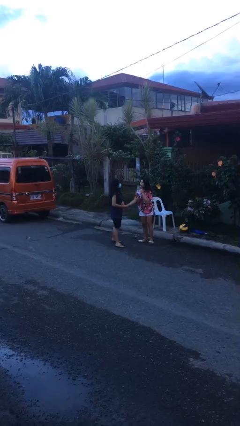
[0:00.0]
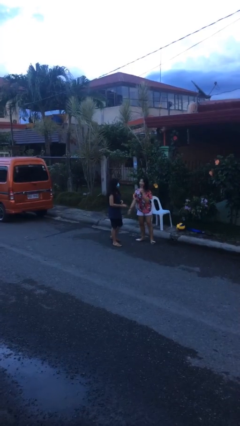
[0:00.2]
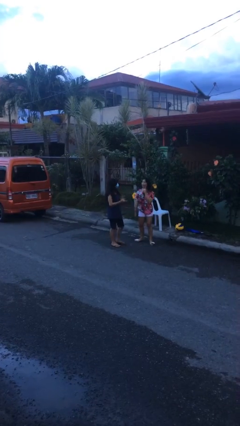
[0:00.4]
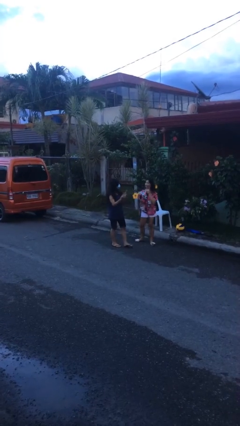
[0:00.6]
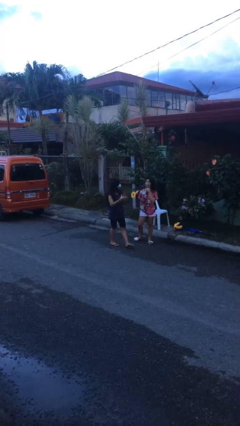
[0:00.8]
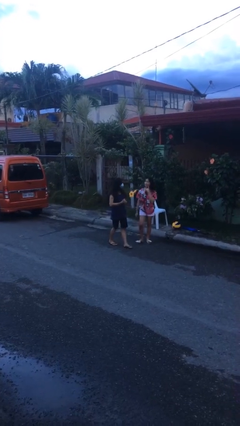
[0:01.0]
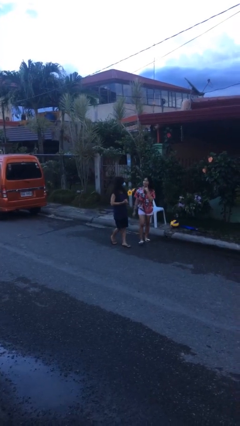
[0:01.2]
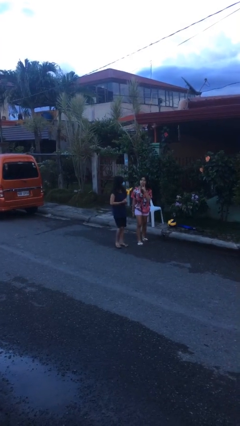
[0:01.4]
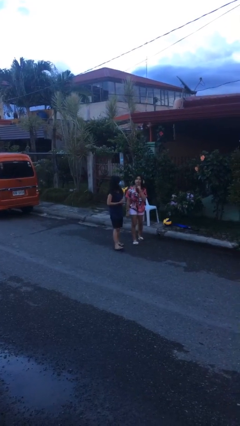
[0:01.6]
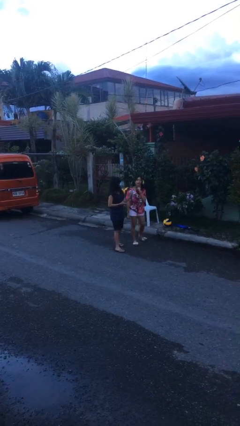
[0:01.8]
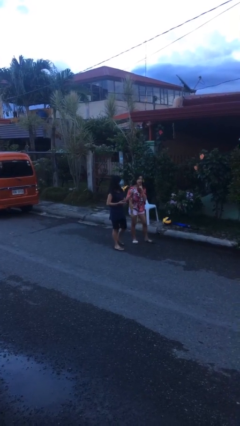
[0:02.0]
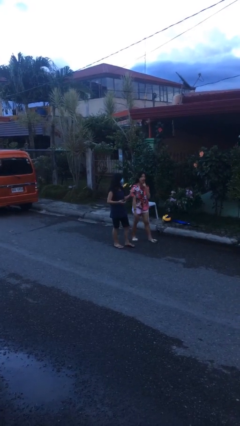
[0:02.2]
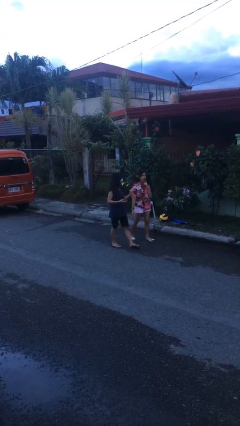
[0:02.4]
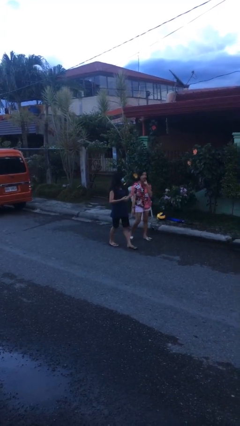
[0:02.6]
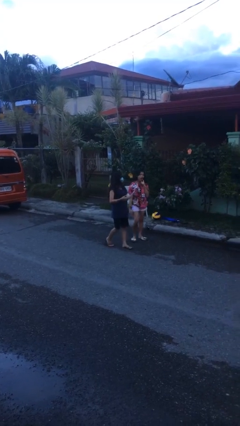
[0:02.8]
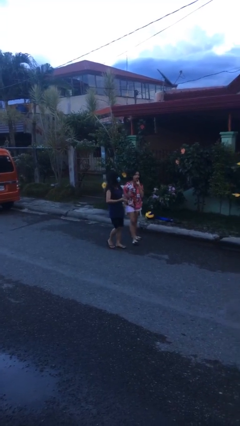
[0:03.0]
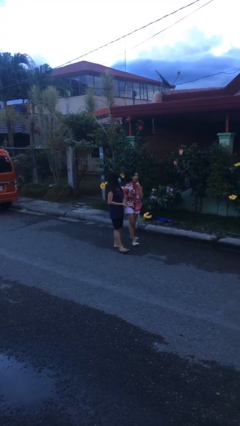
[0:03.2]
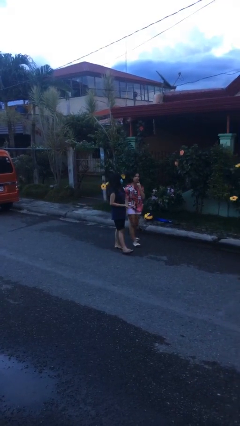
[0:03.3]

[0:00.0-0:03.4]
person talks to person

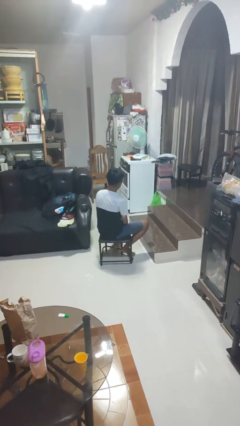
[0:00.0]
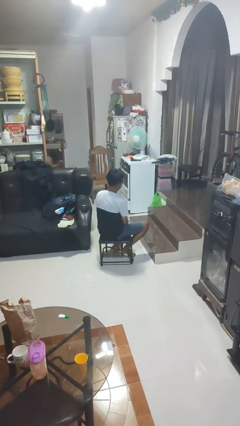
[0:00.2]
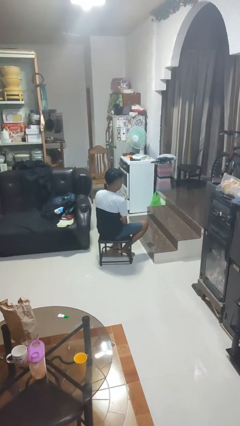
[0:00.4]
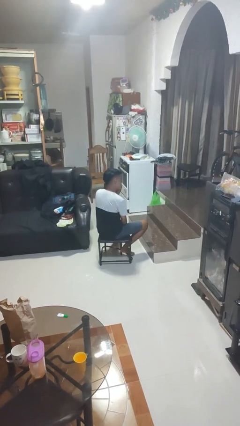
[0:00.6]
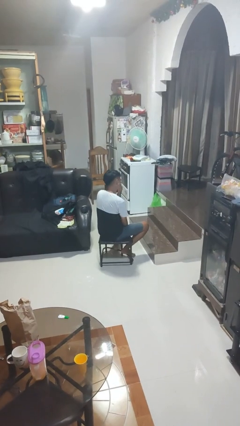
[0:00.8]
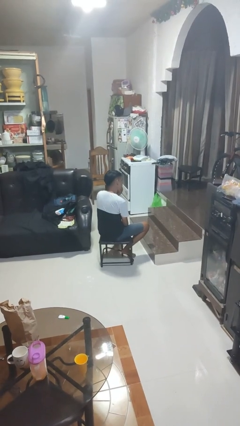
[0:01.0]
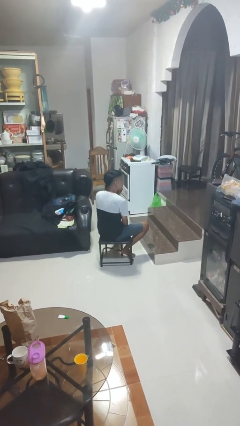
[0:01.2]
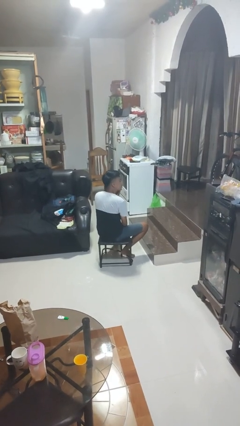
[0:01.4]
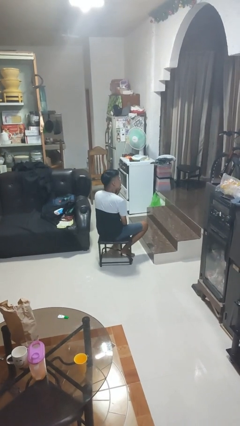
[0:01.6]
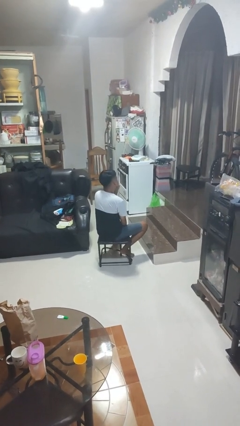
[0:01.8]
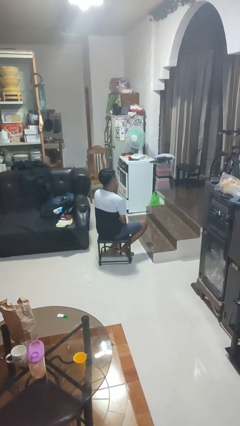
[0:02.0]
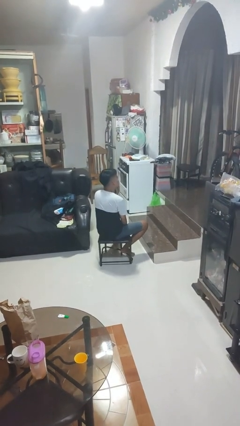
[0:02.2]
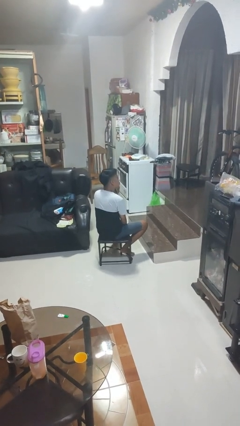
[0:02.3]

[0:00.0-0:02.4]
person strokes chin

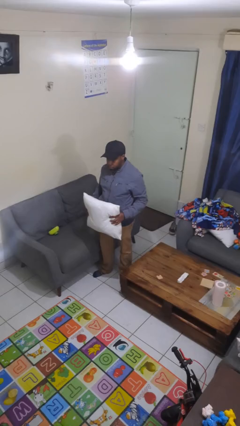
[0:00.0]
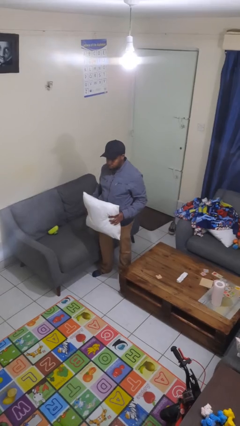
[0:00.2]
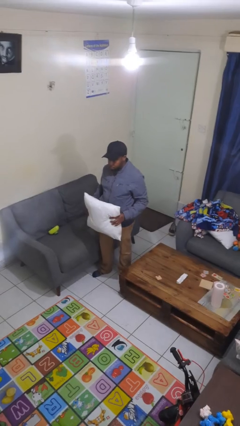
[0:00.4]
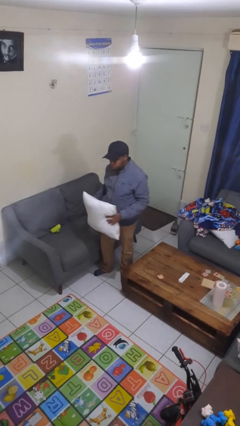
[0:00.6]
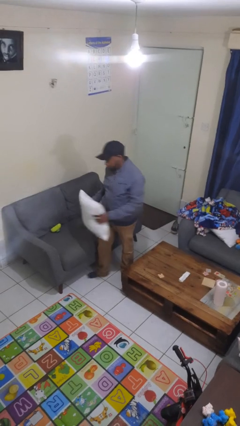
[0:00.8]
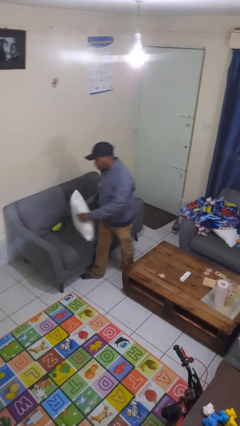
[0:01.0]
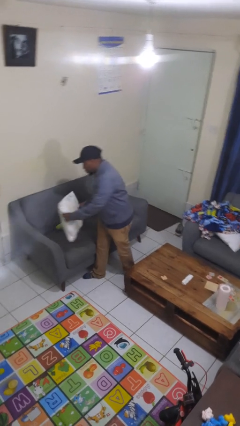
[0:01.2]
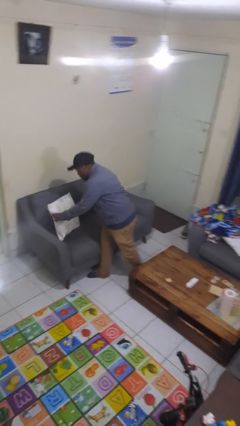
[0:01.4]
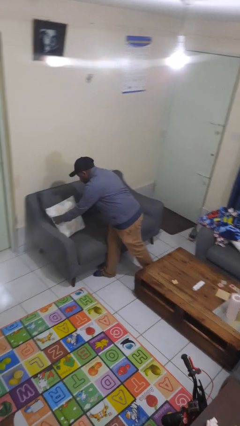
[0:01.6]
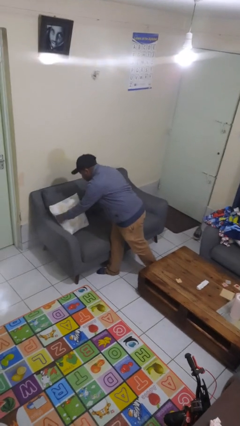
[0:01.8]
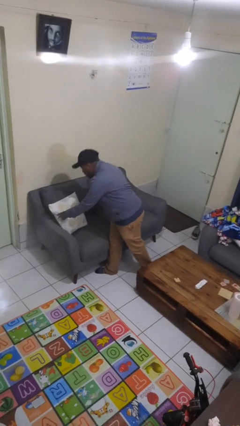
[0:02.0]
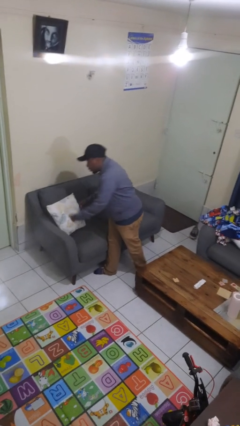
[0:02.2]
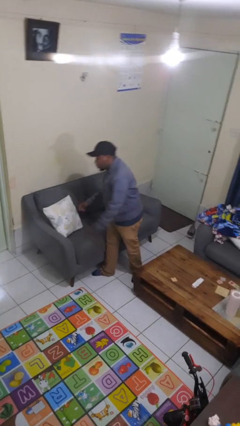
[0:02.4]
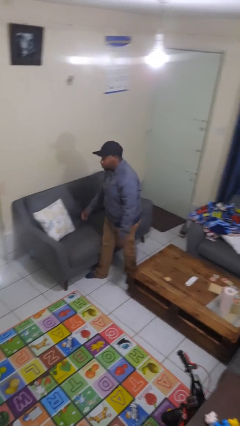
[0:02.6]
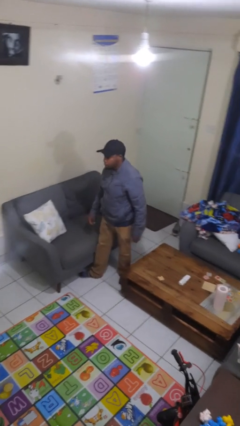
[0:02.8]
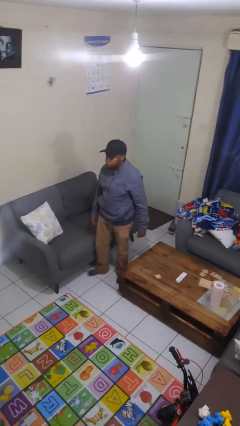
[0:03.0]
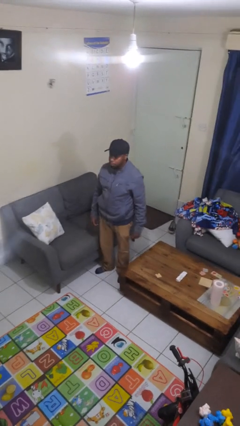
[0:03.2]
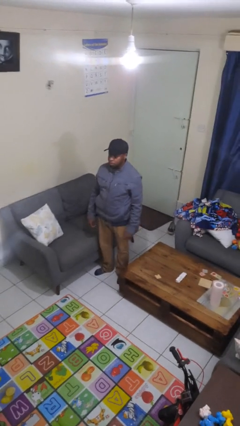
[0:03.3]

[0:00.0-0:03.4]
person puts down object on couch

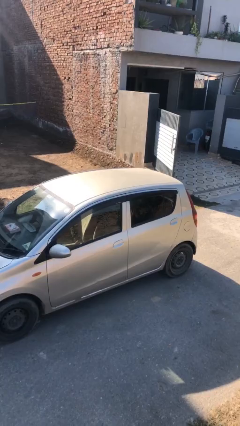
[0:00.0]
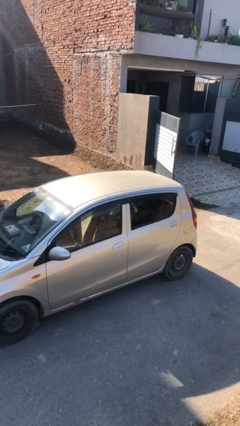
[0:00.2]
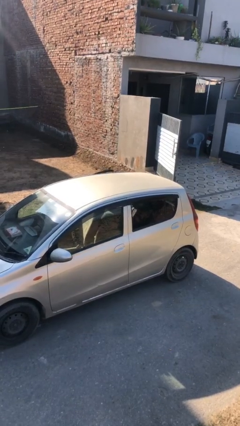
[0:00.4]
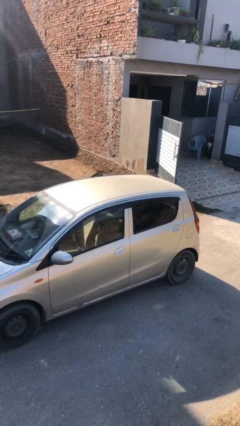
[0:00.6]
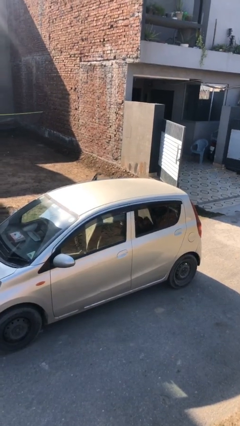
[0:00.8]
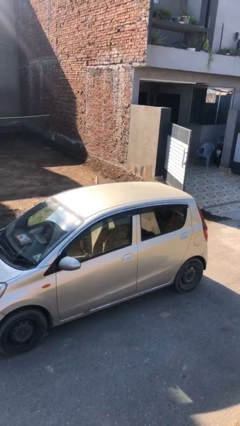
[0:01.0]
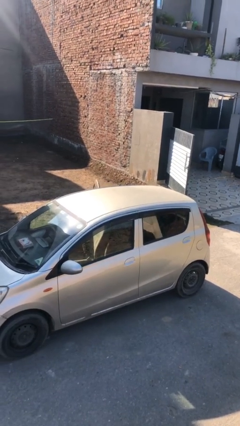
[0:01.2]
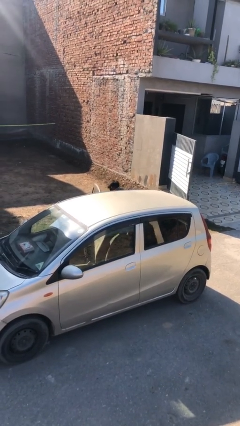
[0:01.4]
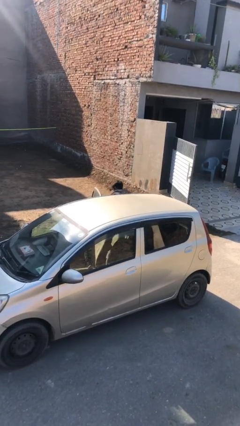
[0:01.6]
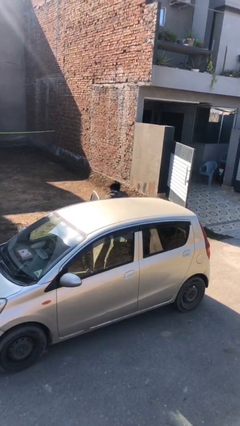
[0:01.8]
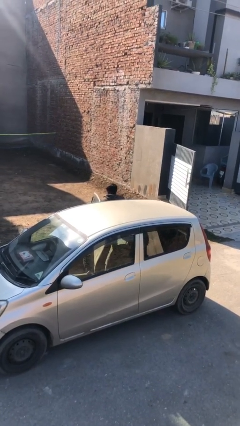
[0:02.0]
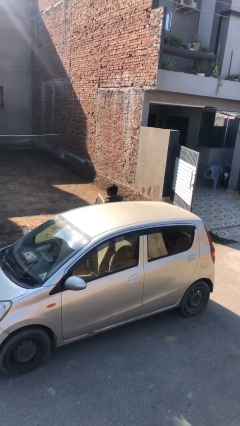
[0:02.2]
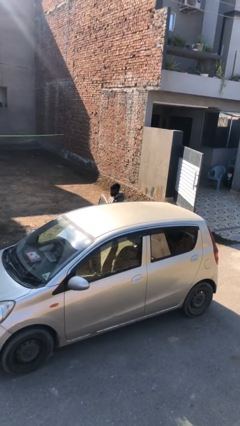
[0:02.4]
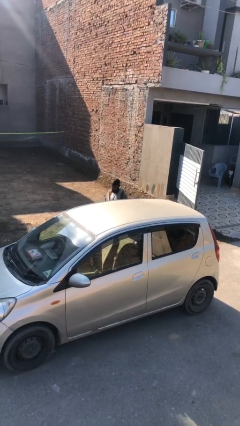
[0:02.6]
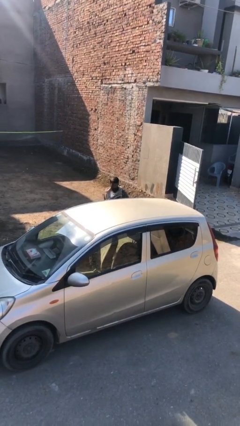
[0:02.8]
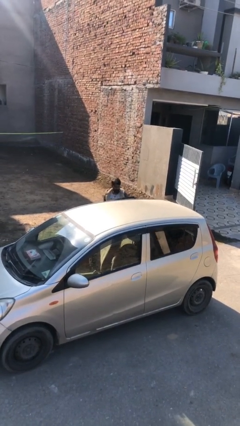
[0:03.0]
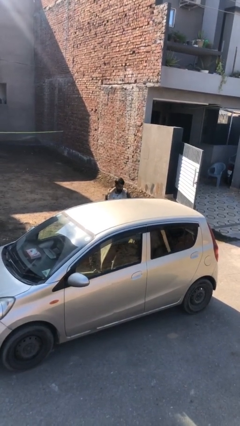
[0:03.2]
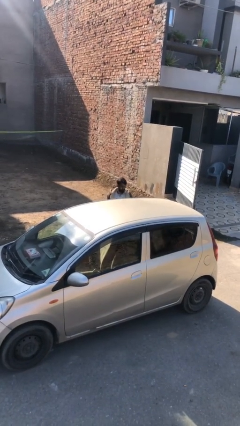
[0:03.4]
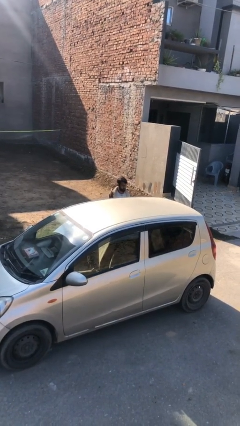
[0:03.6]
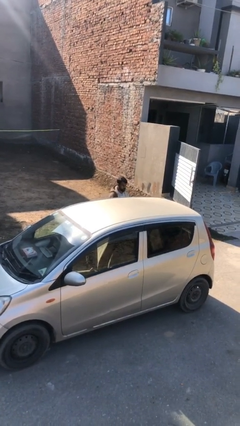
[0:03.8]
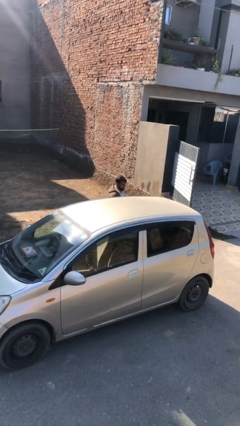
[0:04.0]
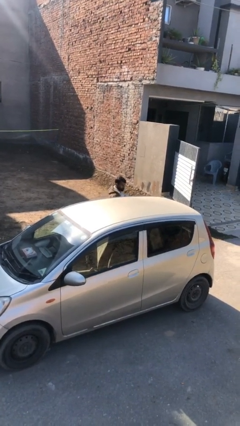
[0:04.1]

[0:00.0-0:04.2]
car drops off person

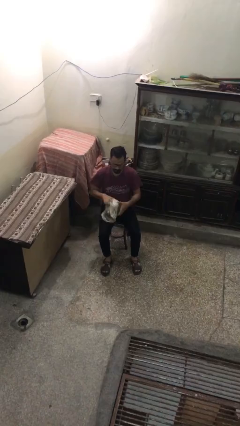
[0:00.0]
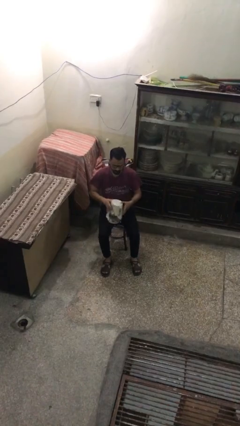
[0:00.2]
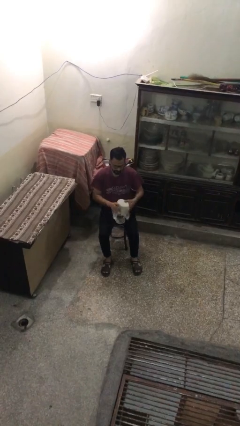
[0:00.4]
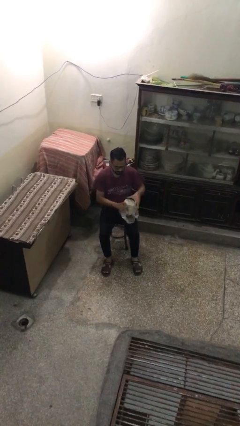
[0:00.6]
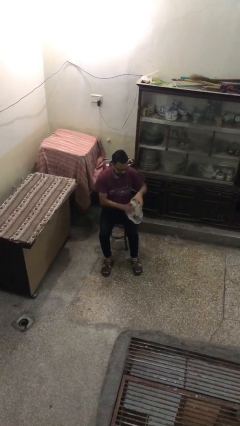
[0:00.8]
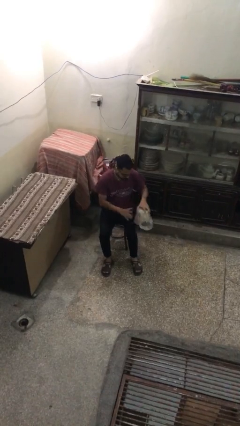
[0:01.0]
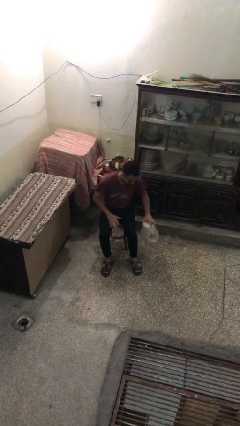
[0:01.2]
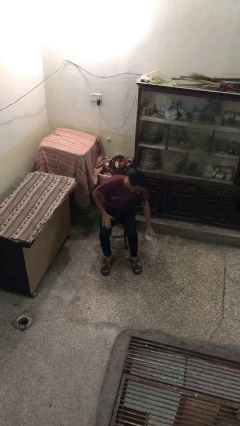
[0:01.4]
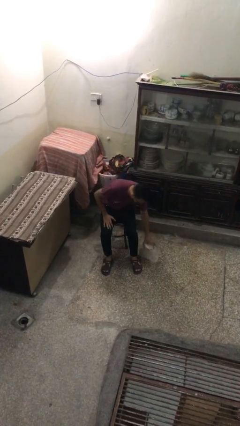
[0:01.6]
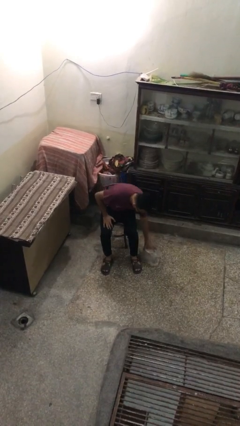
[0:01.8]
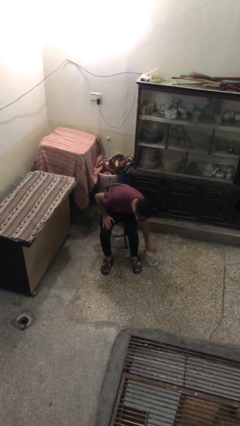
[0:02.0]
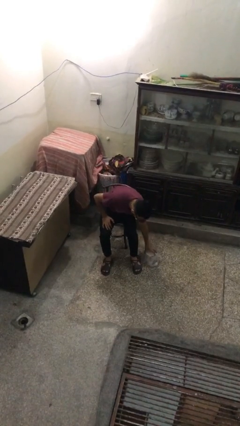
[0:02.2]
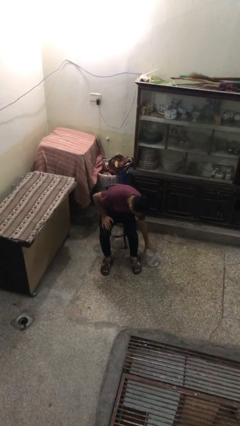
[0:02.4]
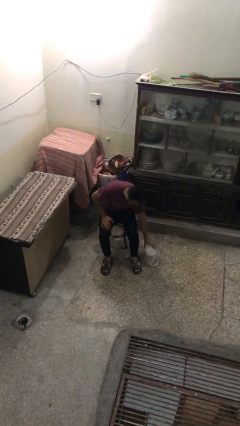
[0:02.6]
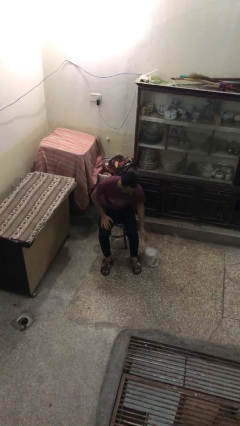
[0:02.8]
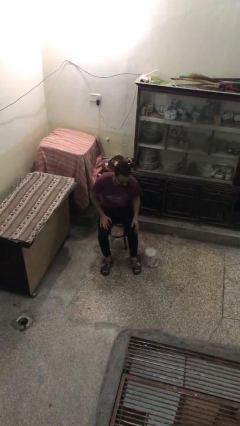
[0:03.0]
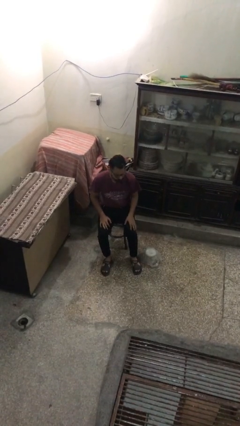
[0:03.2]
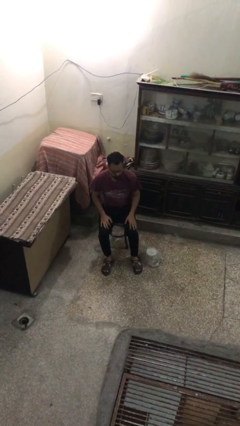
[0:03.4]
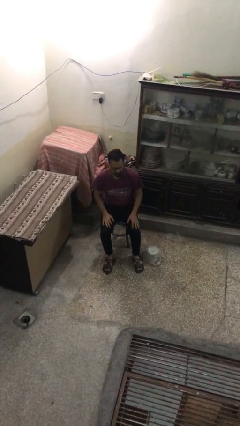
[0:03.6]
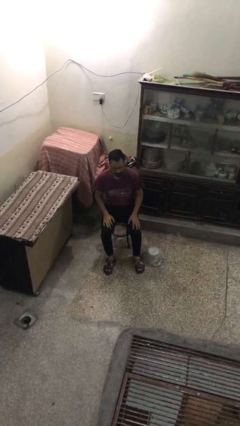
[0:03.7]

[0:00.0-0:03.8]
person puts down object on floor

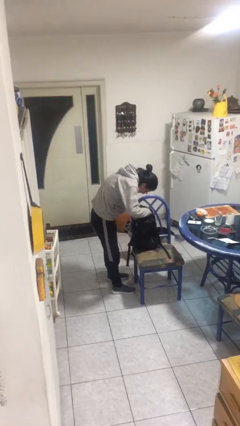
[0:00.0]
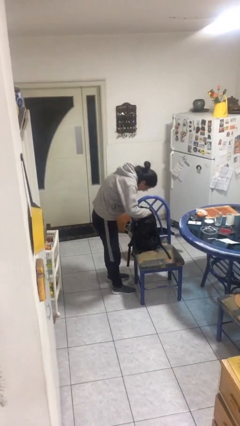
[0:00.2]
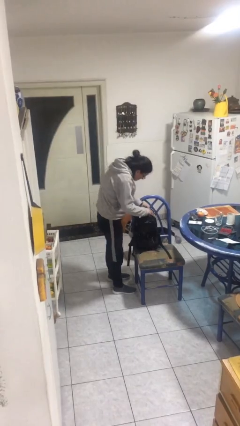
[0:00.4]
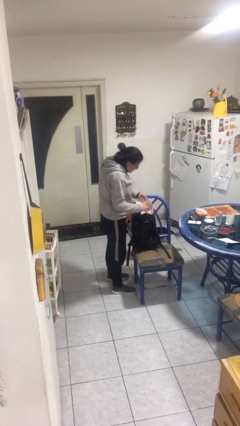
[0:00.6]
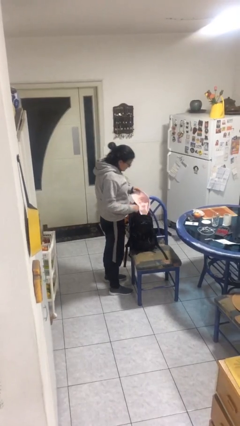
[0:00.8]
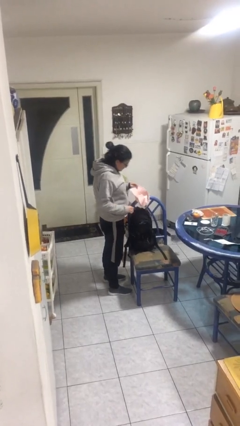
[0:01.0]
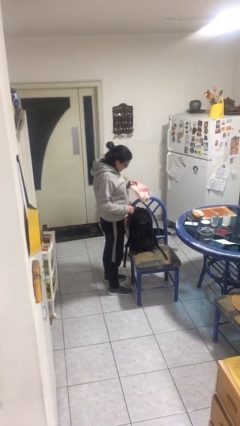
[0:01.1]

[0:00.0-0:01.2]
person takes object from backpack
